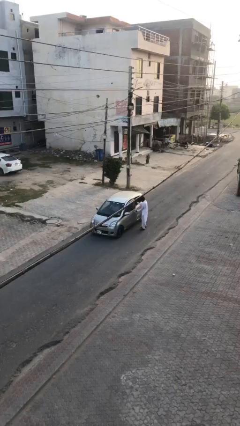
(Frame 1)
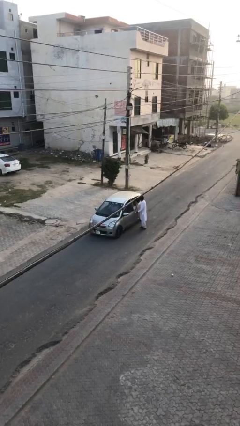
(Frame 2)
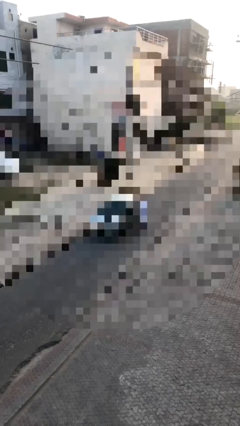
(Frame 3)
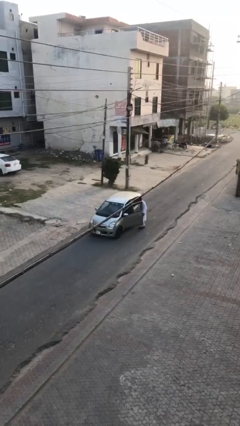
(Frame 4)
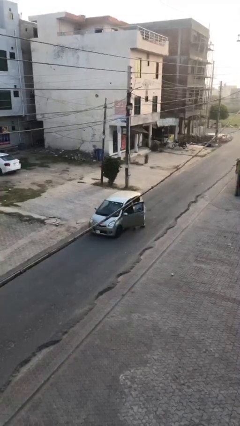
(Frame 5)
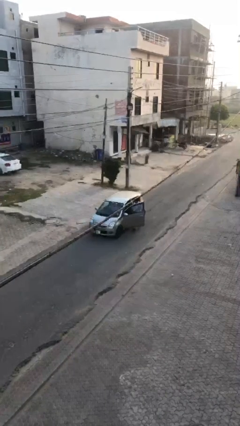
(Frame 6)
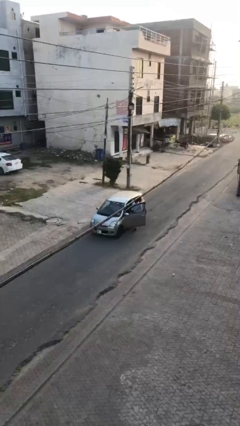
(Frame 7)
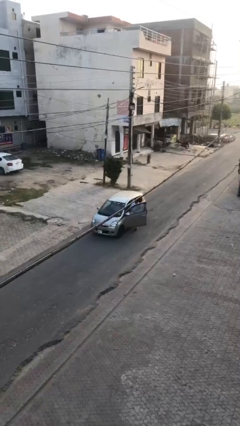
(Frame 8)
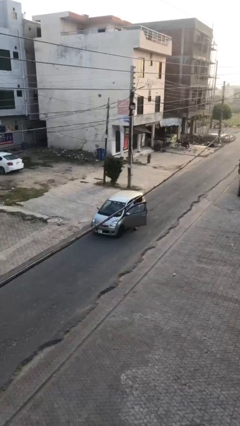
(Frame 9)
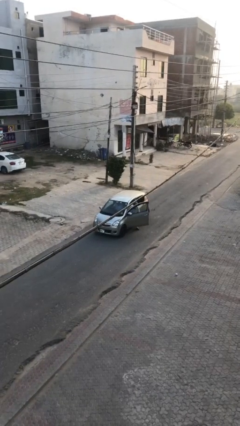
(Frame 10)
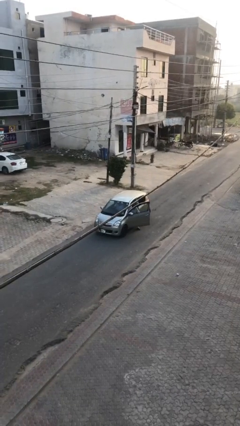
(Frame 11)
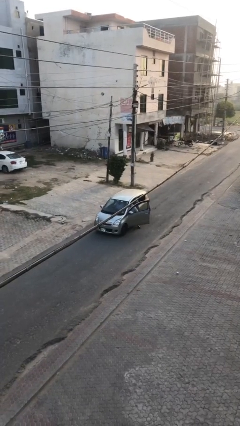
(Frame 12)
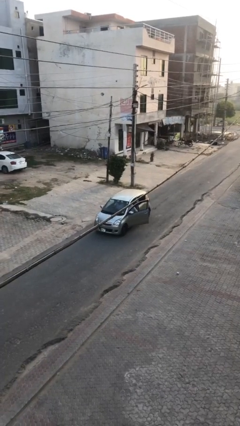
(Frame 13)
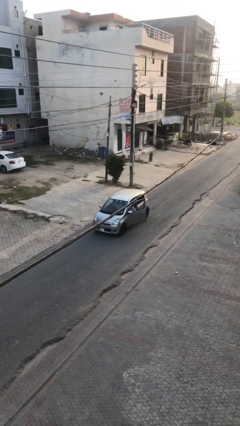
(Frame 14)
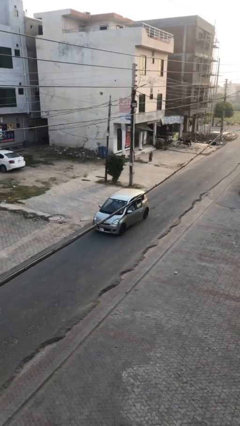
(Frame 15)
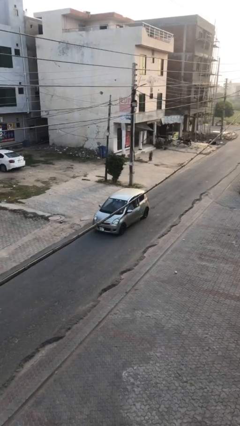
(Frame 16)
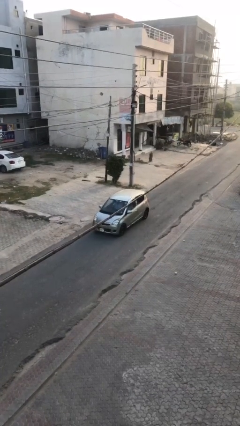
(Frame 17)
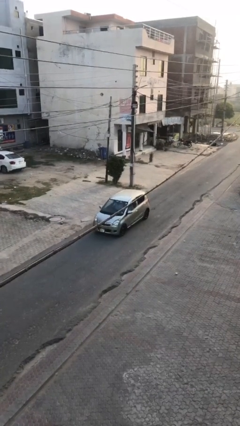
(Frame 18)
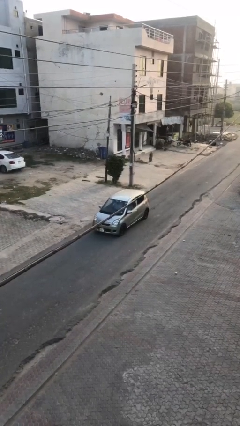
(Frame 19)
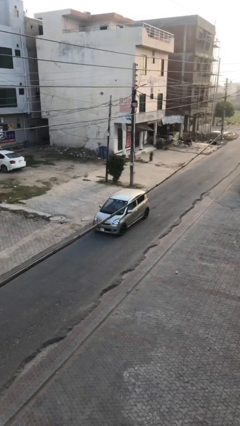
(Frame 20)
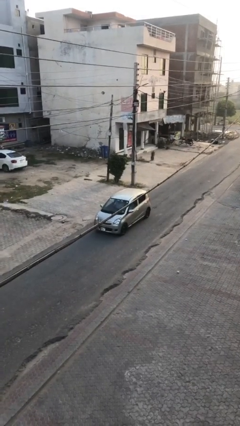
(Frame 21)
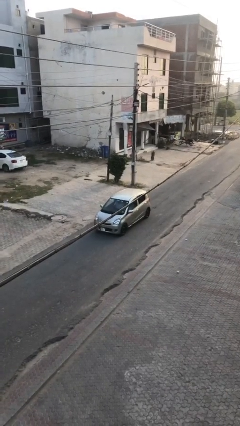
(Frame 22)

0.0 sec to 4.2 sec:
car picks up person

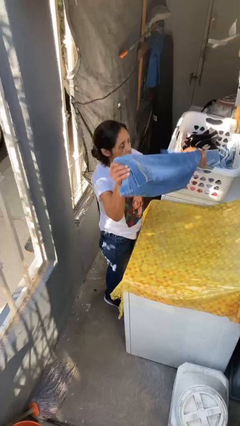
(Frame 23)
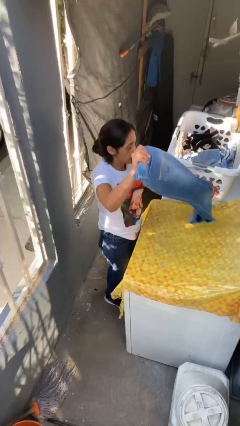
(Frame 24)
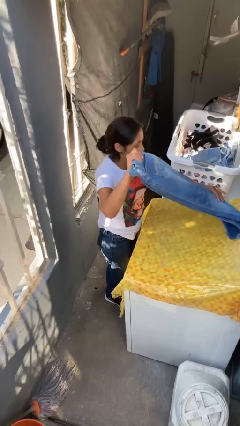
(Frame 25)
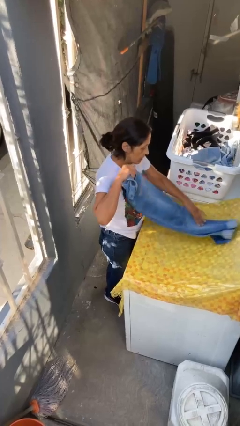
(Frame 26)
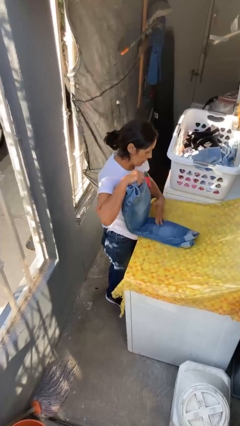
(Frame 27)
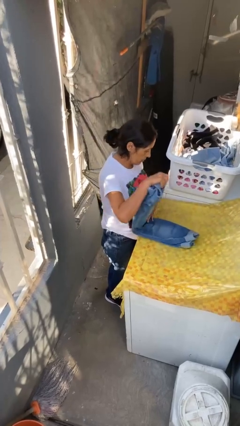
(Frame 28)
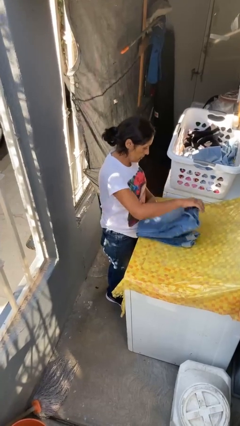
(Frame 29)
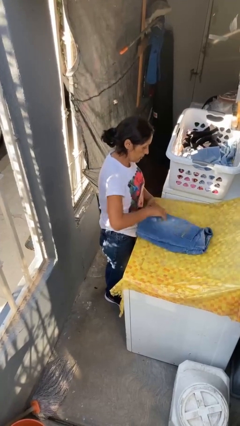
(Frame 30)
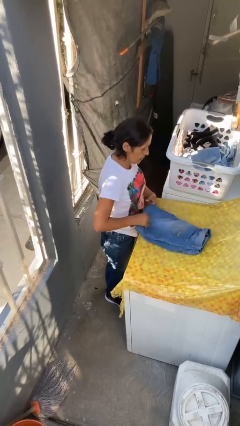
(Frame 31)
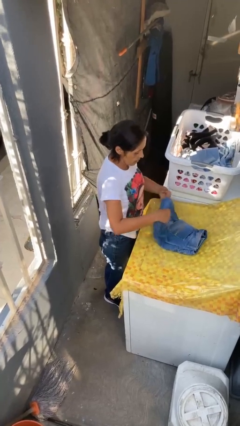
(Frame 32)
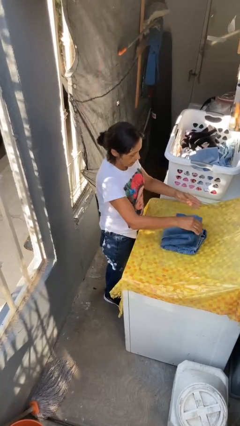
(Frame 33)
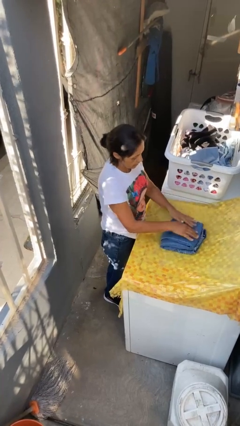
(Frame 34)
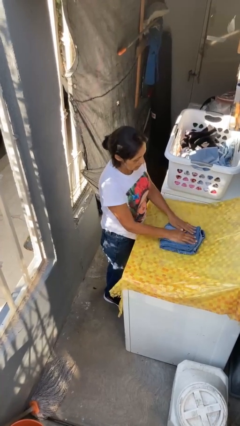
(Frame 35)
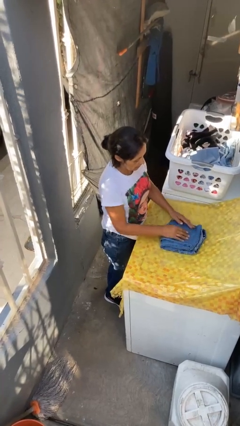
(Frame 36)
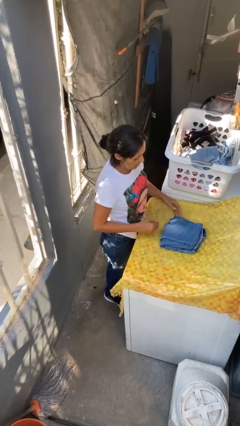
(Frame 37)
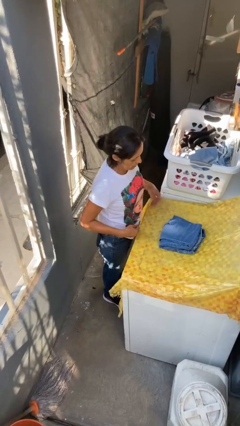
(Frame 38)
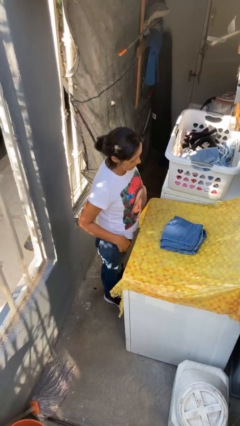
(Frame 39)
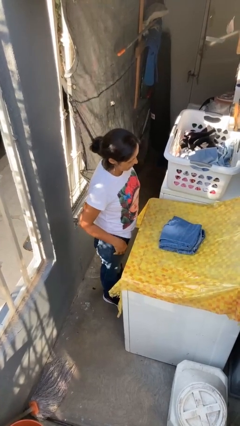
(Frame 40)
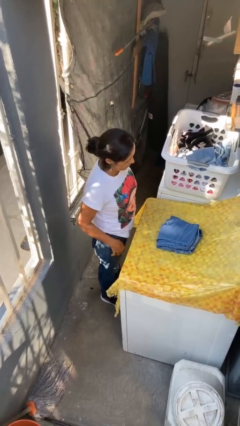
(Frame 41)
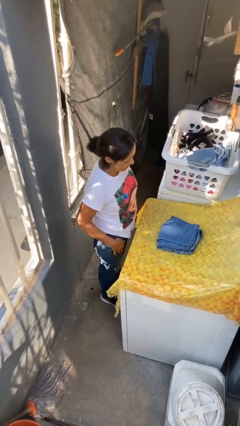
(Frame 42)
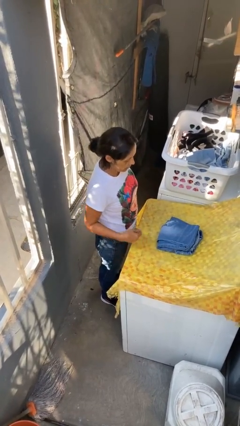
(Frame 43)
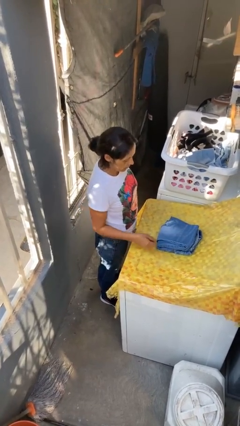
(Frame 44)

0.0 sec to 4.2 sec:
person folds pants

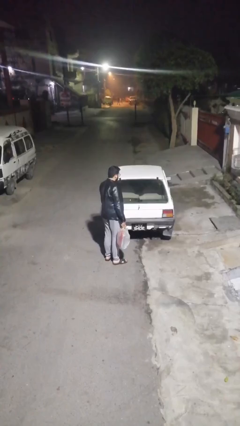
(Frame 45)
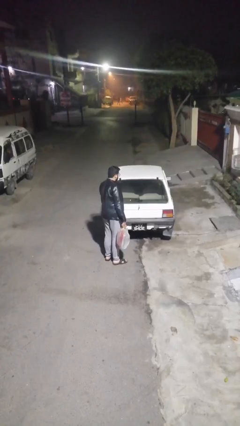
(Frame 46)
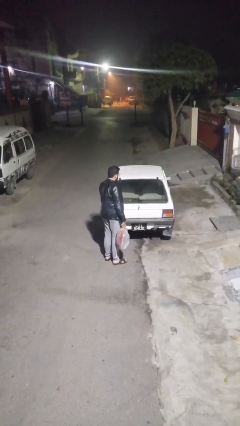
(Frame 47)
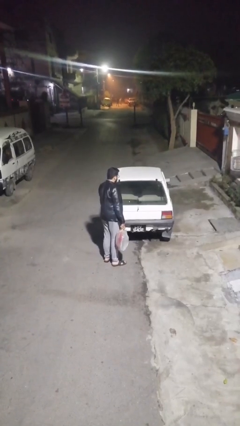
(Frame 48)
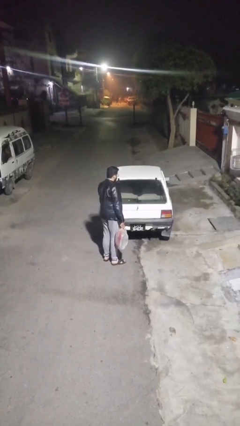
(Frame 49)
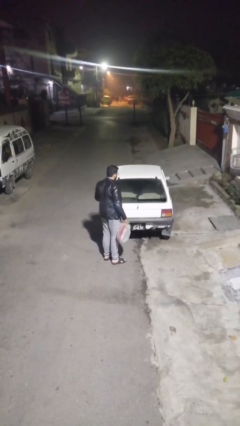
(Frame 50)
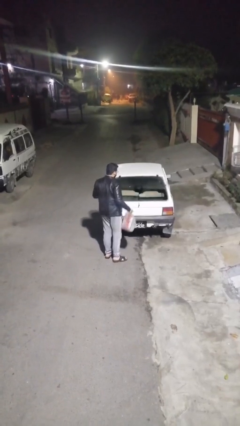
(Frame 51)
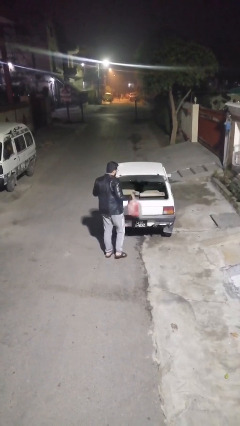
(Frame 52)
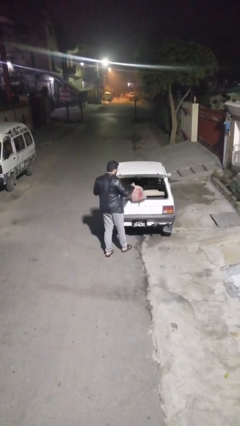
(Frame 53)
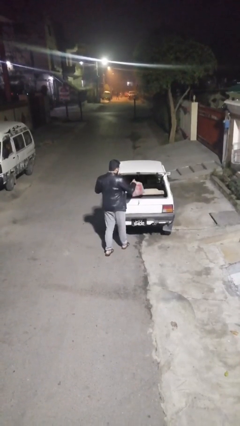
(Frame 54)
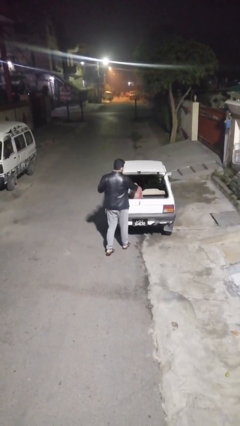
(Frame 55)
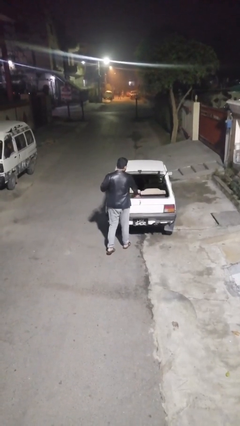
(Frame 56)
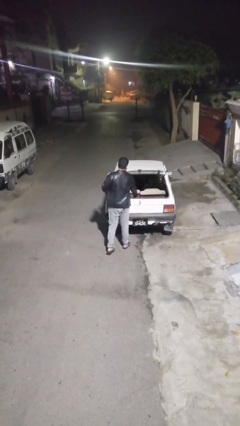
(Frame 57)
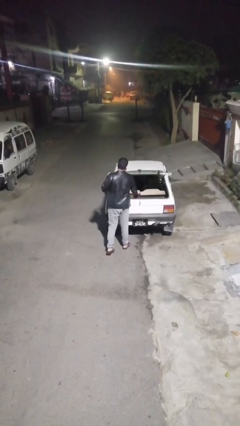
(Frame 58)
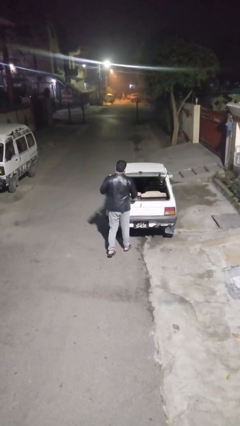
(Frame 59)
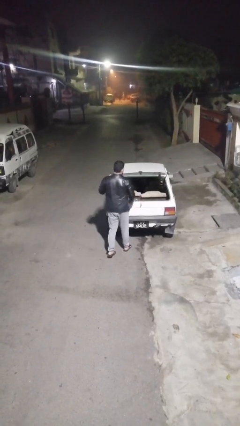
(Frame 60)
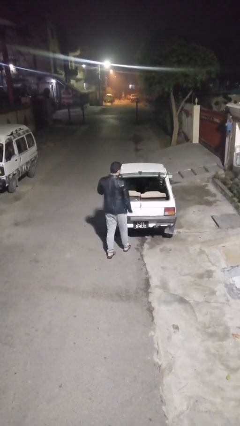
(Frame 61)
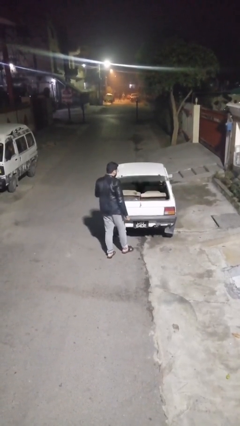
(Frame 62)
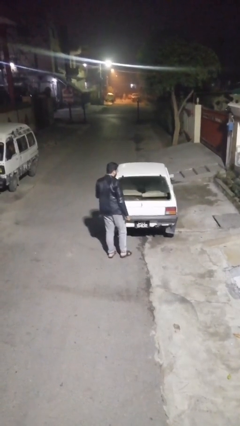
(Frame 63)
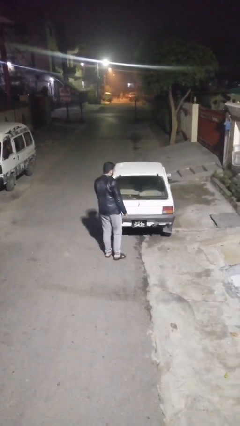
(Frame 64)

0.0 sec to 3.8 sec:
person loads car

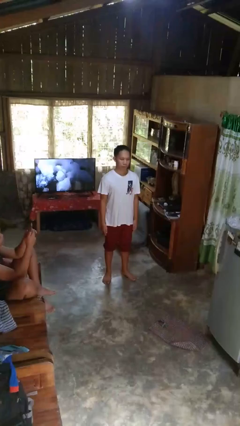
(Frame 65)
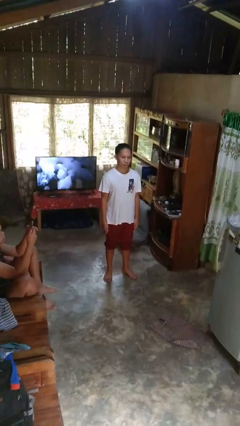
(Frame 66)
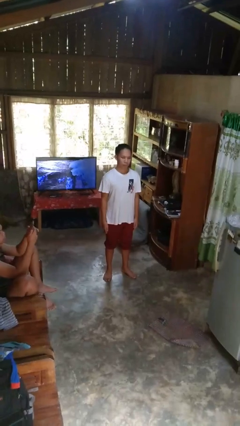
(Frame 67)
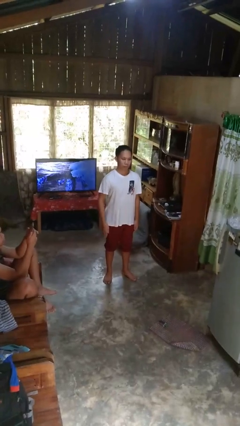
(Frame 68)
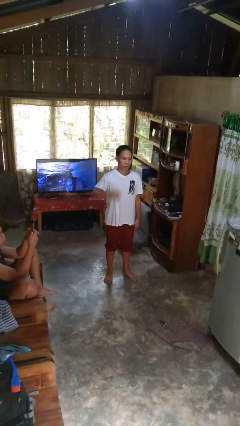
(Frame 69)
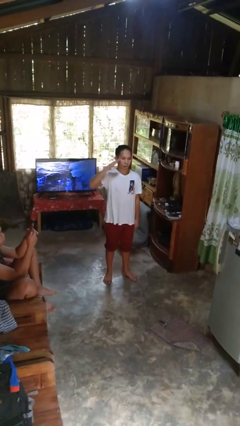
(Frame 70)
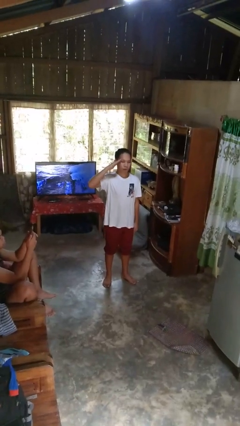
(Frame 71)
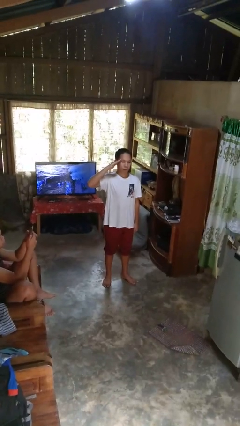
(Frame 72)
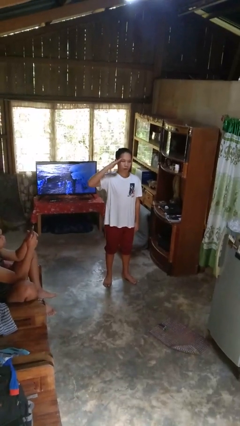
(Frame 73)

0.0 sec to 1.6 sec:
person salutes

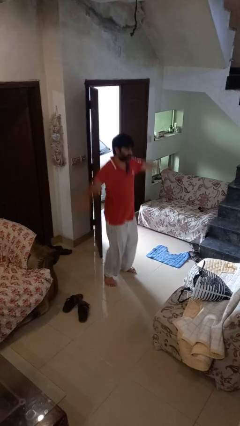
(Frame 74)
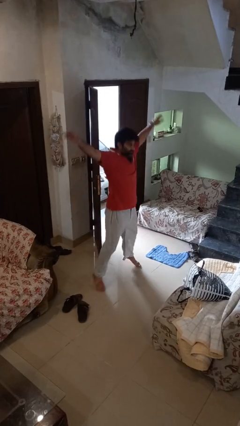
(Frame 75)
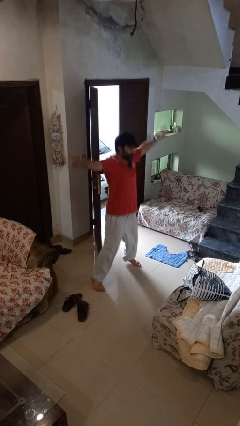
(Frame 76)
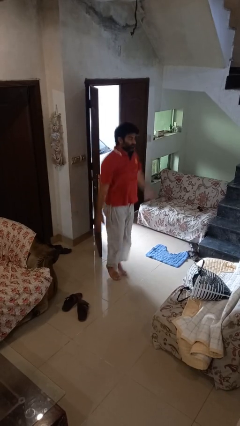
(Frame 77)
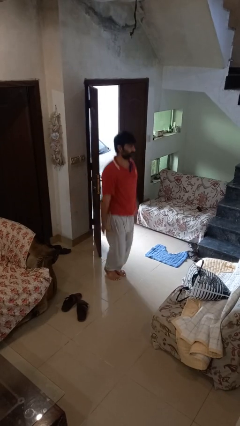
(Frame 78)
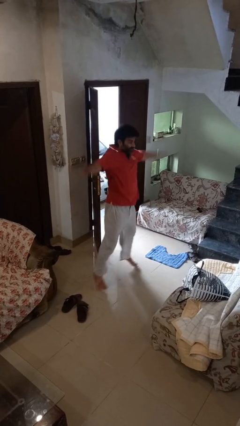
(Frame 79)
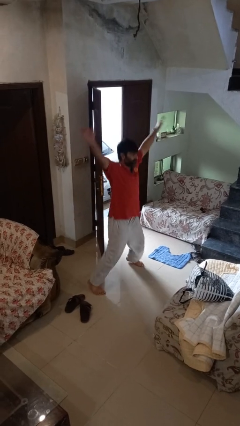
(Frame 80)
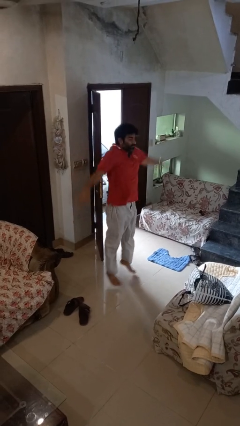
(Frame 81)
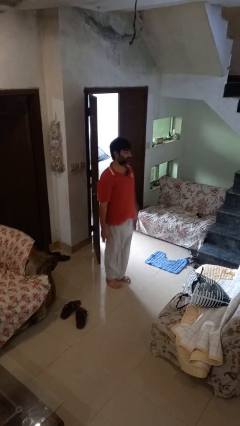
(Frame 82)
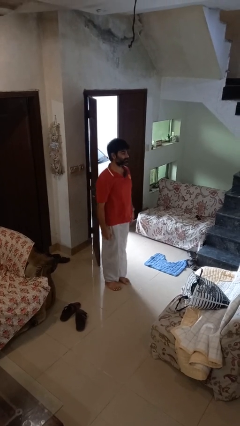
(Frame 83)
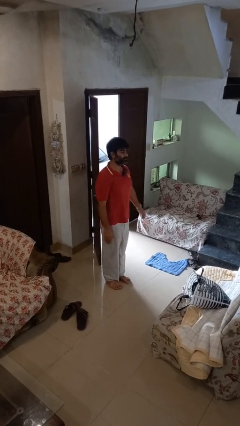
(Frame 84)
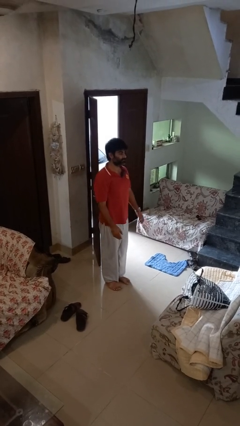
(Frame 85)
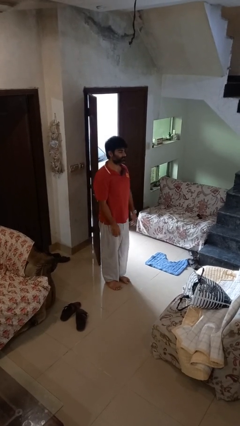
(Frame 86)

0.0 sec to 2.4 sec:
person exercises with jumping jacks

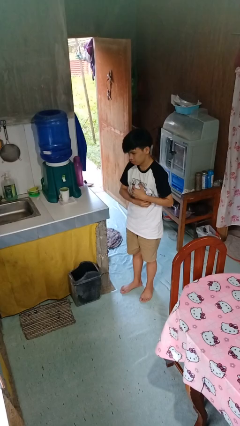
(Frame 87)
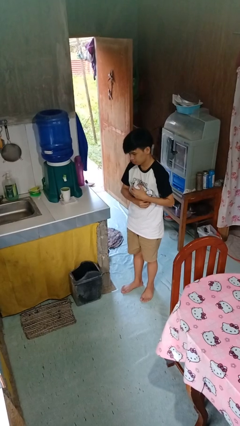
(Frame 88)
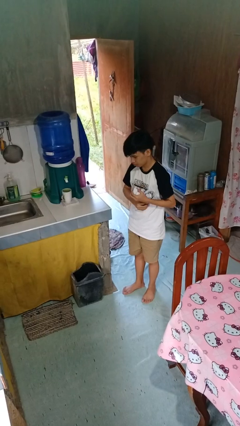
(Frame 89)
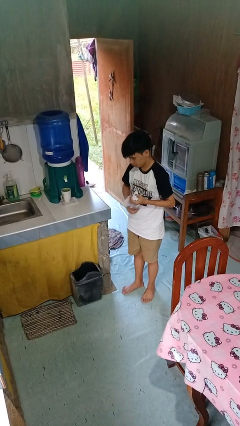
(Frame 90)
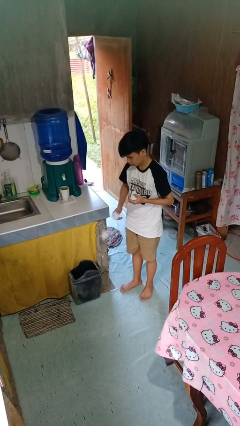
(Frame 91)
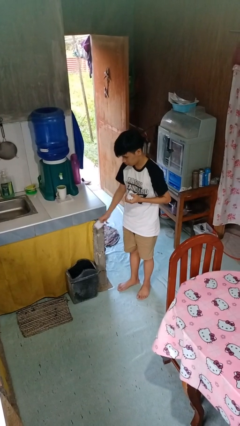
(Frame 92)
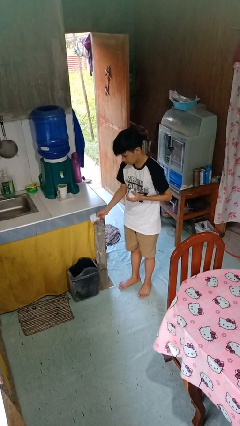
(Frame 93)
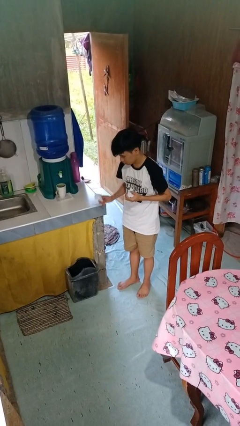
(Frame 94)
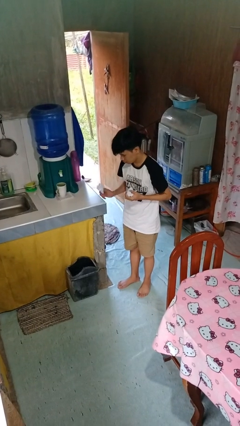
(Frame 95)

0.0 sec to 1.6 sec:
person discards trash
